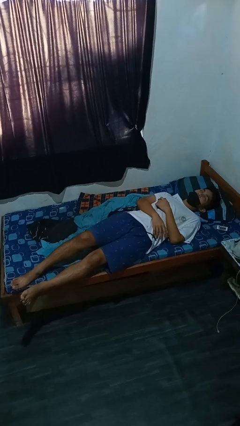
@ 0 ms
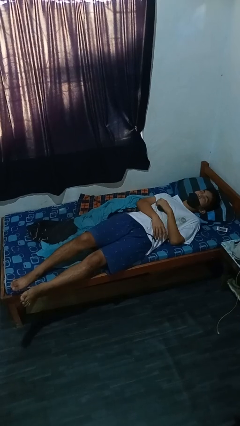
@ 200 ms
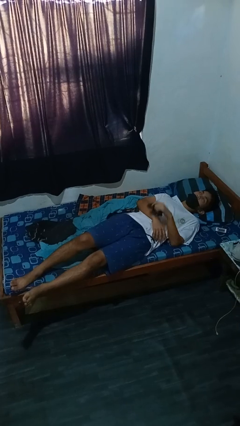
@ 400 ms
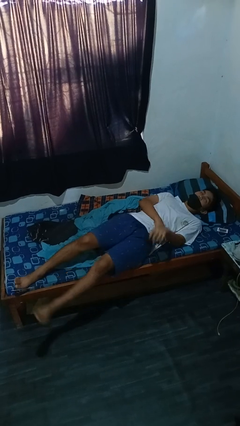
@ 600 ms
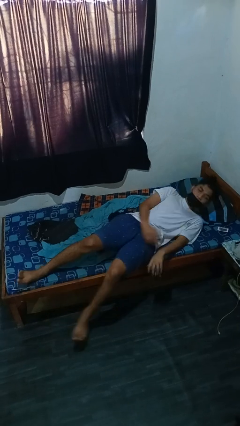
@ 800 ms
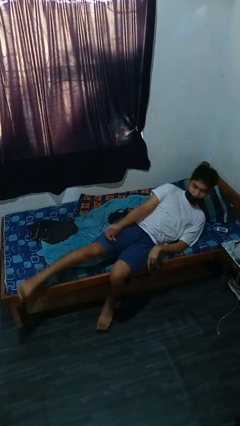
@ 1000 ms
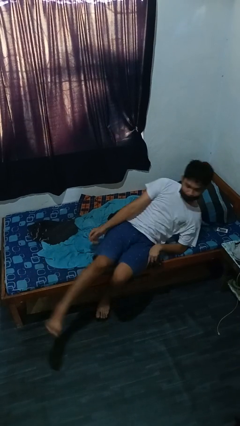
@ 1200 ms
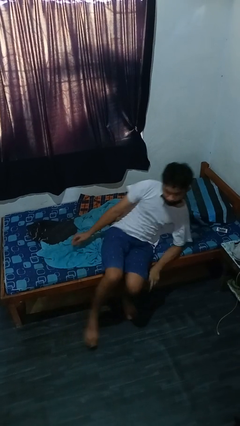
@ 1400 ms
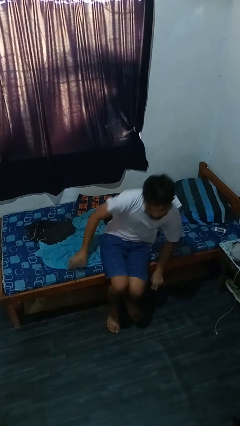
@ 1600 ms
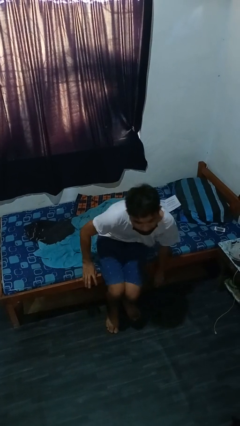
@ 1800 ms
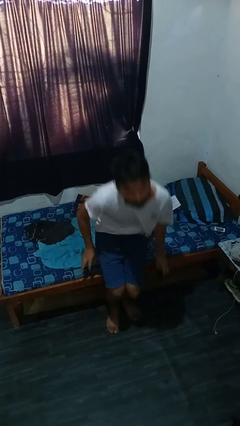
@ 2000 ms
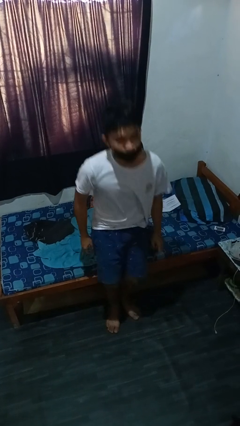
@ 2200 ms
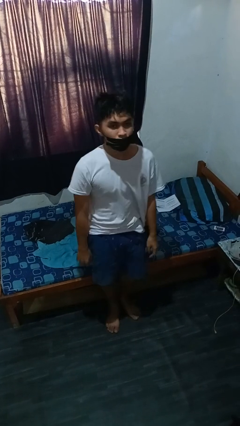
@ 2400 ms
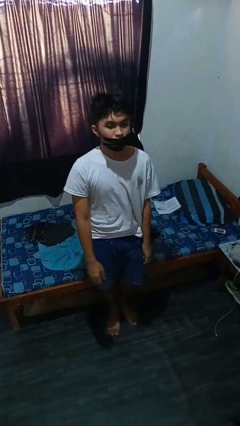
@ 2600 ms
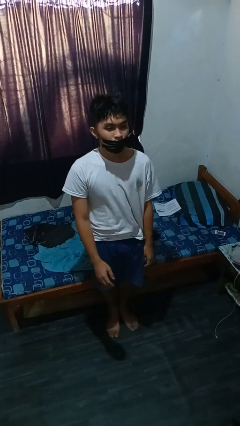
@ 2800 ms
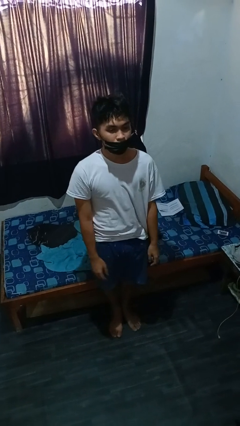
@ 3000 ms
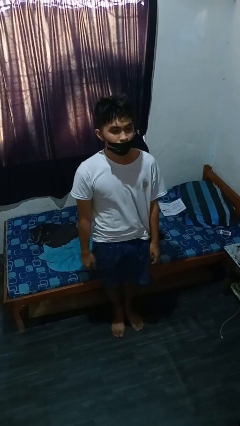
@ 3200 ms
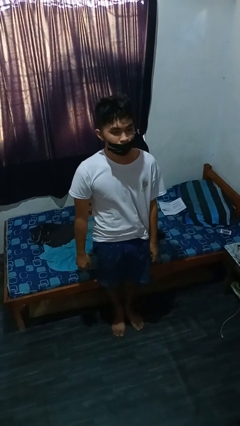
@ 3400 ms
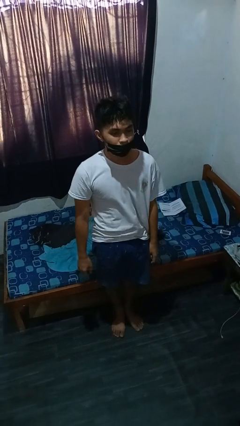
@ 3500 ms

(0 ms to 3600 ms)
person stands up

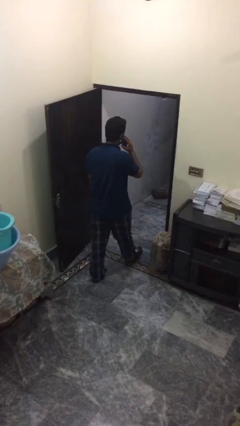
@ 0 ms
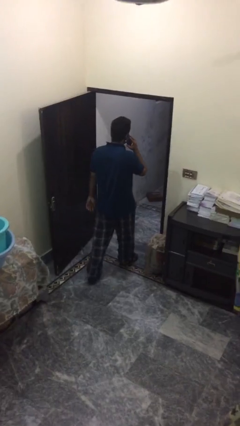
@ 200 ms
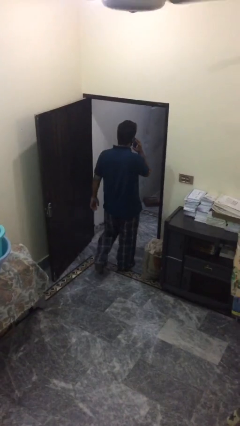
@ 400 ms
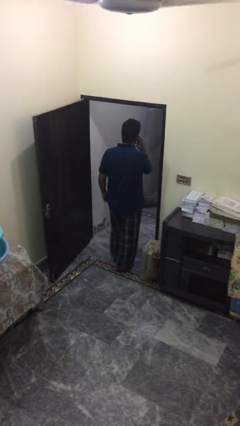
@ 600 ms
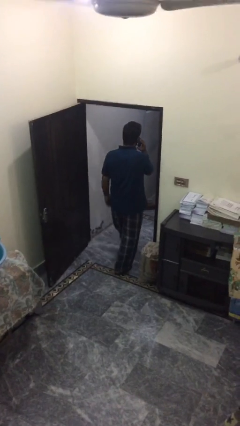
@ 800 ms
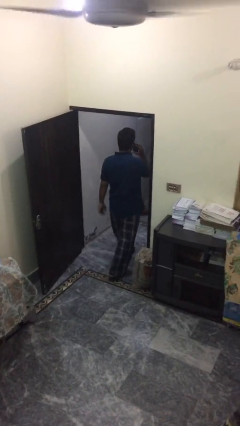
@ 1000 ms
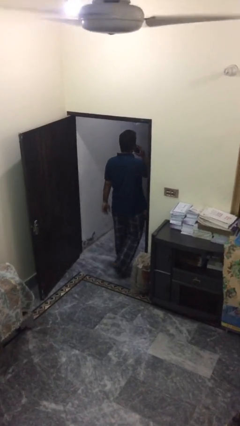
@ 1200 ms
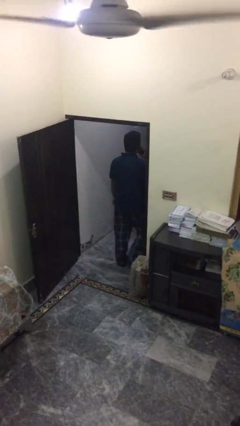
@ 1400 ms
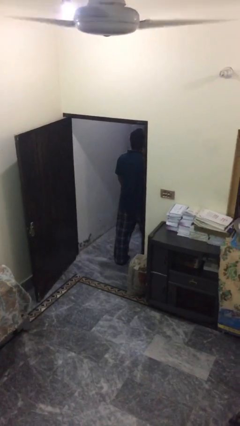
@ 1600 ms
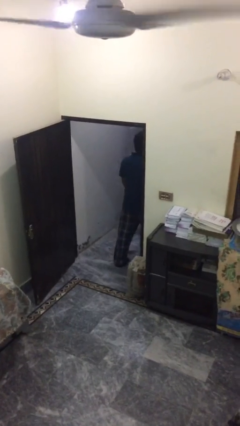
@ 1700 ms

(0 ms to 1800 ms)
person exits scene through structure

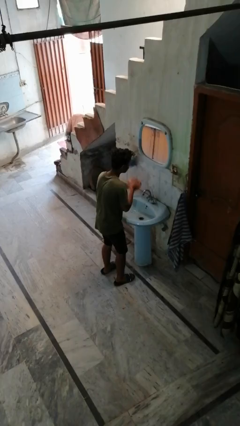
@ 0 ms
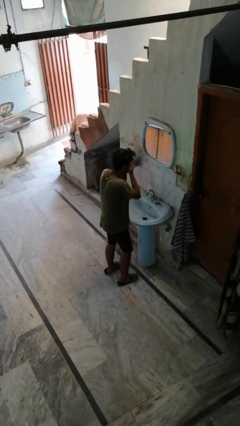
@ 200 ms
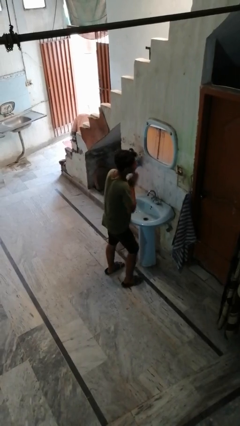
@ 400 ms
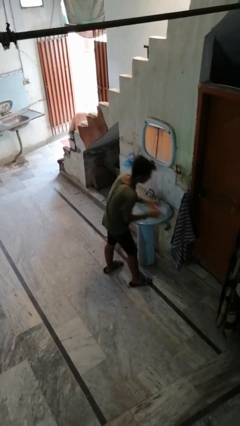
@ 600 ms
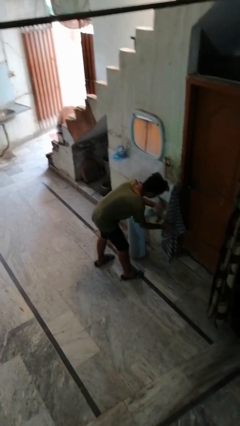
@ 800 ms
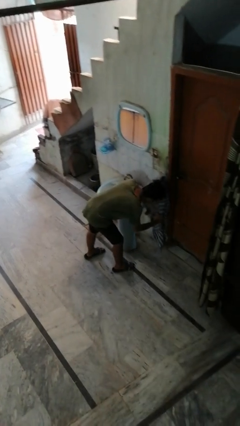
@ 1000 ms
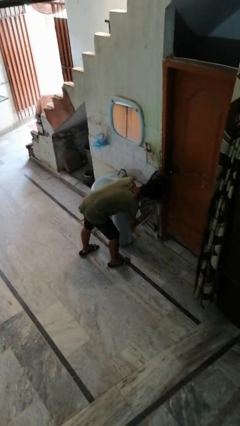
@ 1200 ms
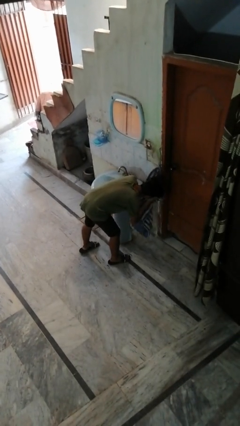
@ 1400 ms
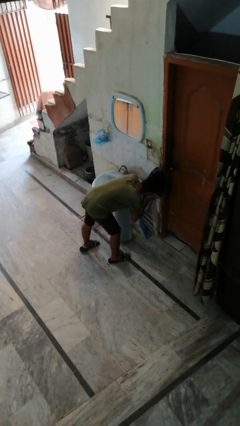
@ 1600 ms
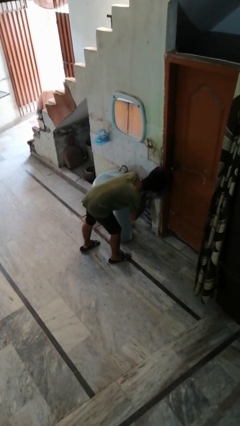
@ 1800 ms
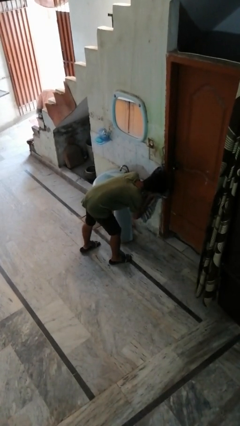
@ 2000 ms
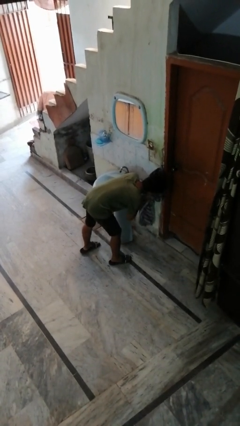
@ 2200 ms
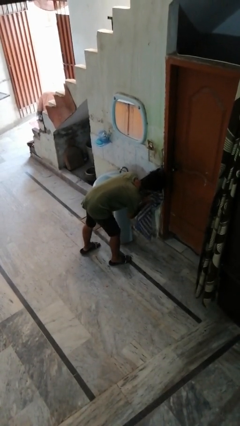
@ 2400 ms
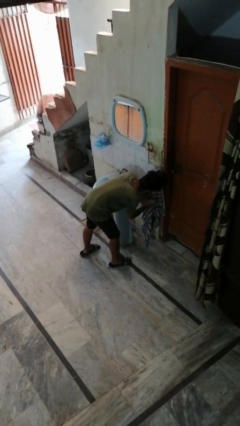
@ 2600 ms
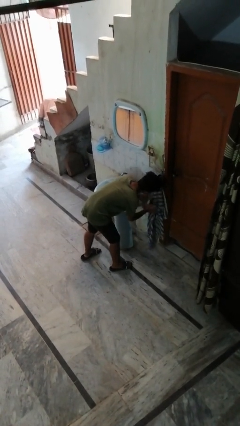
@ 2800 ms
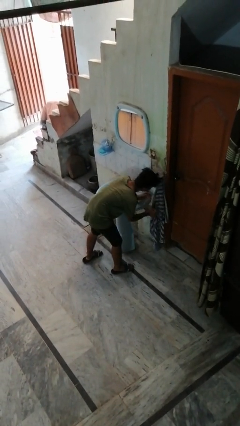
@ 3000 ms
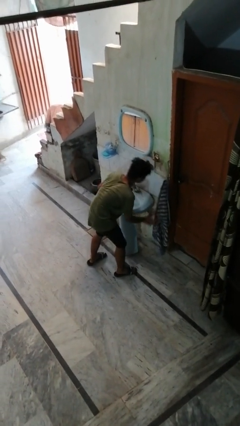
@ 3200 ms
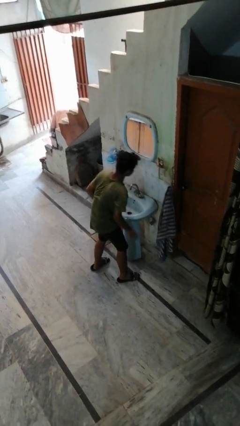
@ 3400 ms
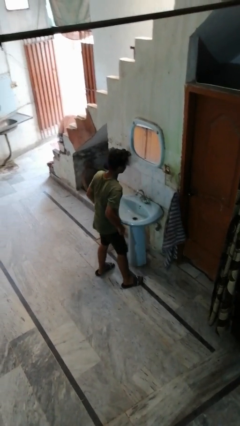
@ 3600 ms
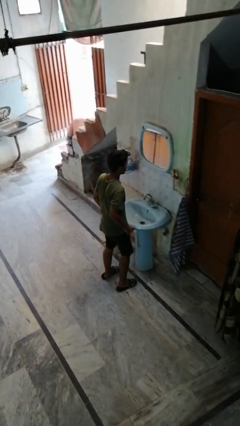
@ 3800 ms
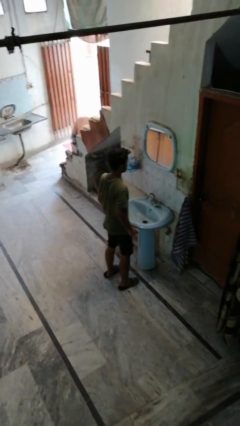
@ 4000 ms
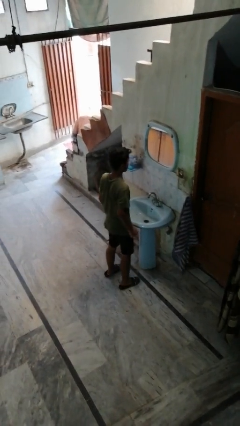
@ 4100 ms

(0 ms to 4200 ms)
person dries face with towel

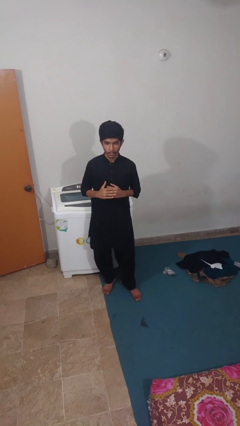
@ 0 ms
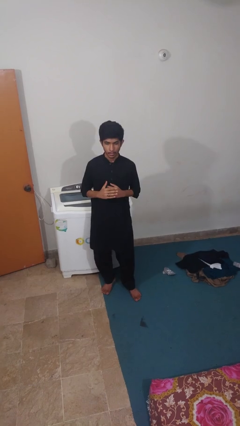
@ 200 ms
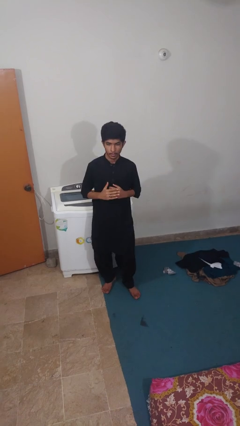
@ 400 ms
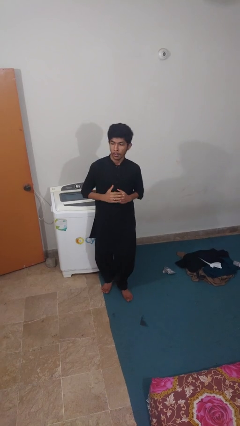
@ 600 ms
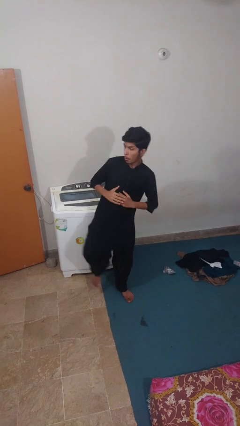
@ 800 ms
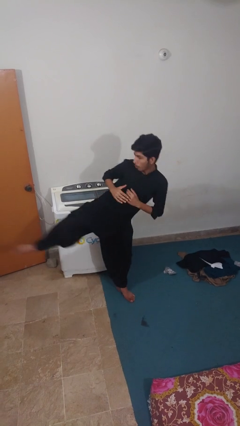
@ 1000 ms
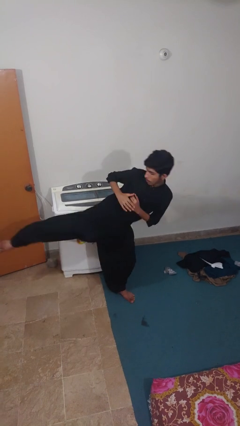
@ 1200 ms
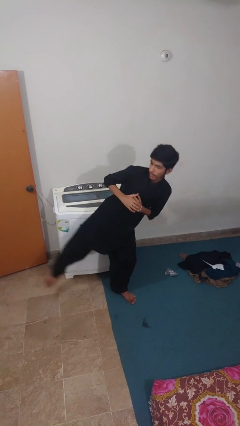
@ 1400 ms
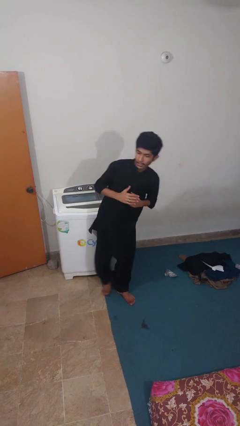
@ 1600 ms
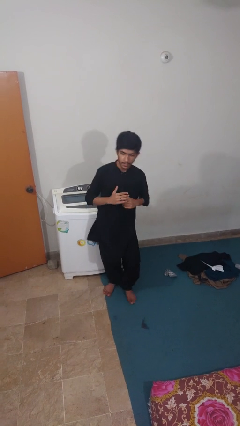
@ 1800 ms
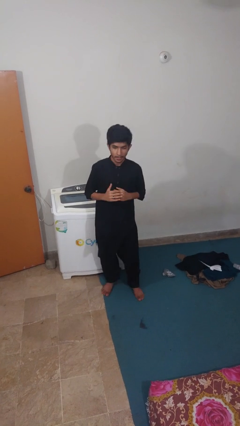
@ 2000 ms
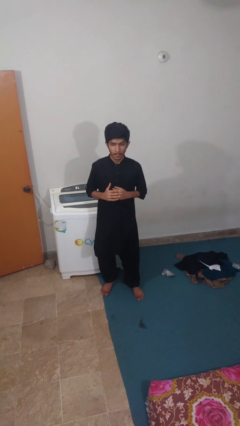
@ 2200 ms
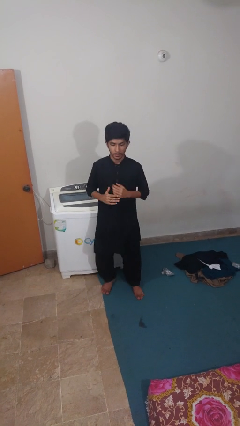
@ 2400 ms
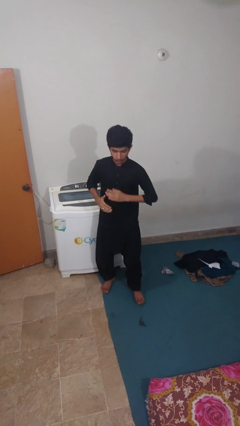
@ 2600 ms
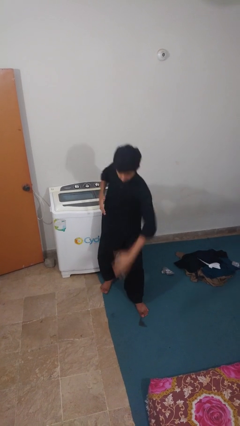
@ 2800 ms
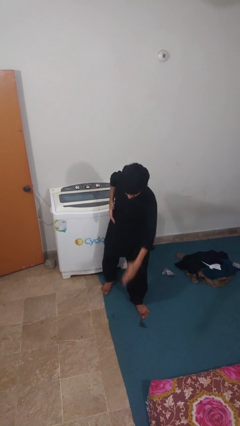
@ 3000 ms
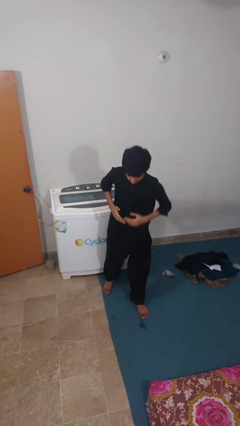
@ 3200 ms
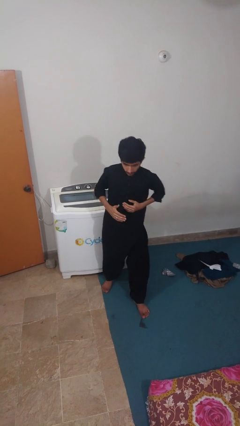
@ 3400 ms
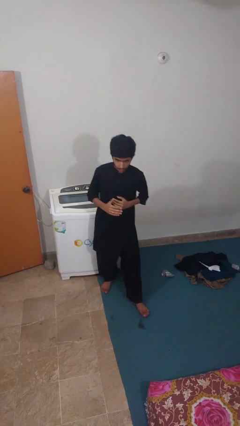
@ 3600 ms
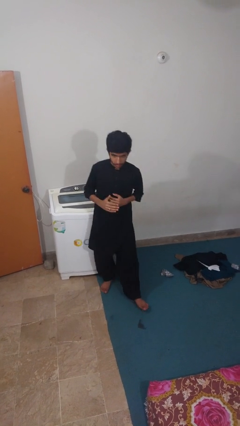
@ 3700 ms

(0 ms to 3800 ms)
person karate kicks

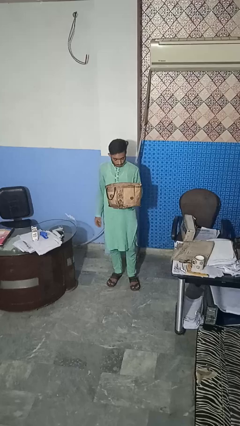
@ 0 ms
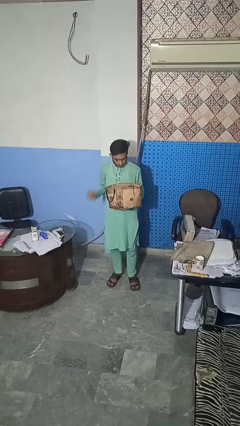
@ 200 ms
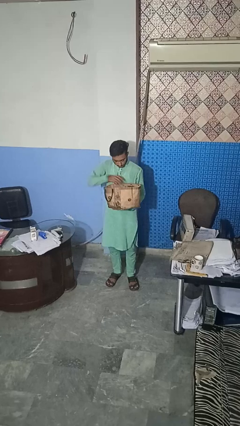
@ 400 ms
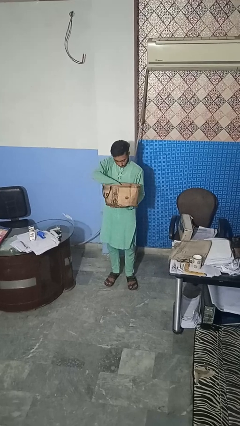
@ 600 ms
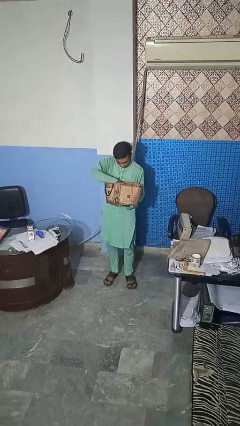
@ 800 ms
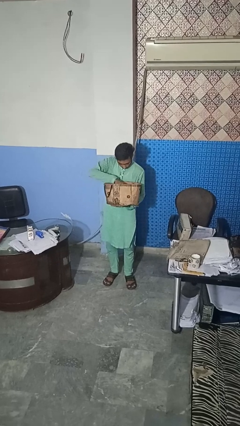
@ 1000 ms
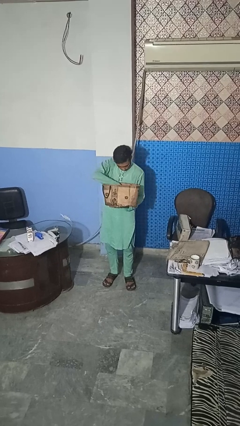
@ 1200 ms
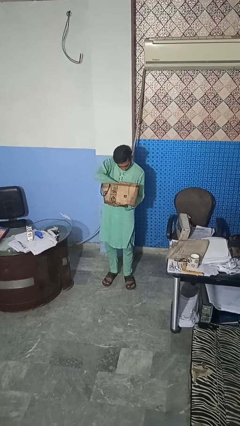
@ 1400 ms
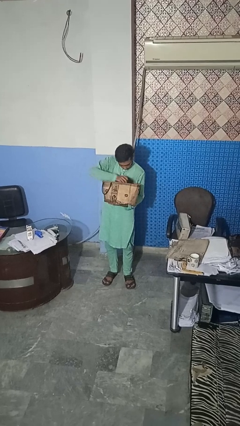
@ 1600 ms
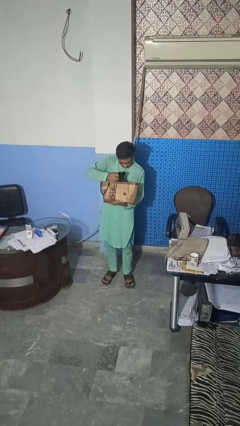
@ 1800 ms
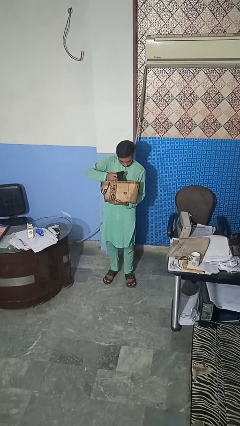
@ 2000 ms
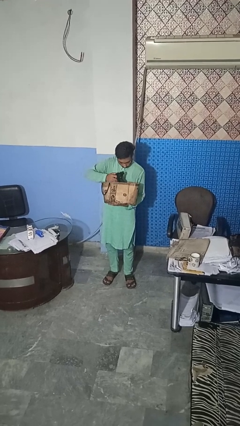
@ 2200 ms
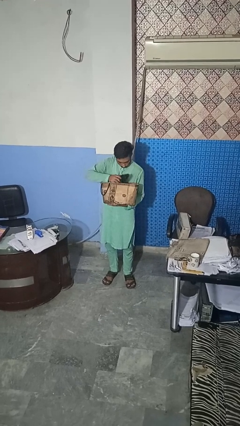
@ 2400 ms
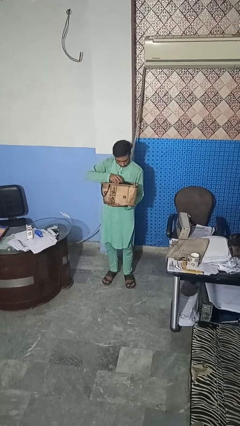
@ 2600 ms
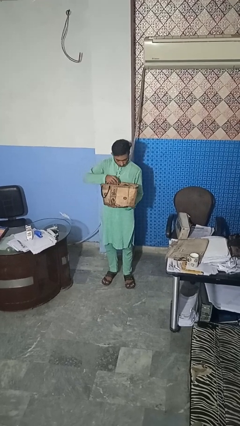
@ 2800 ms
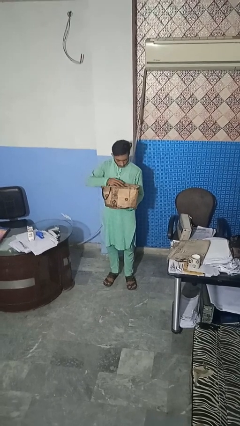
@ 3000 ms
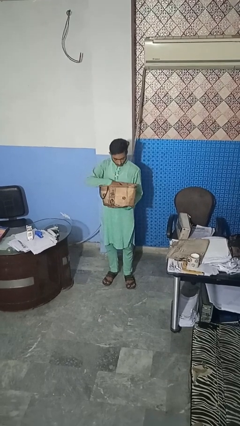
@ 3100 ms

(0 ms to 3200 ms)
person searches in bag

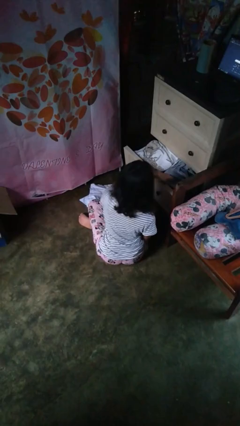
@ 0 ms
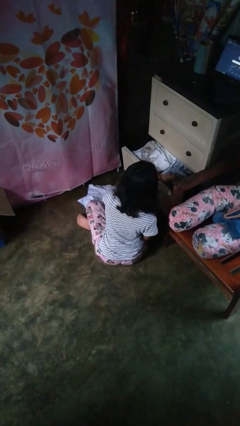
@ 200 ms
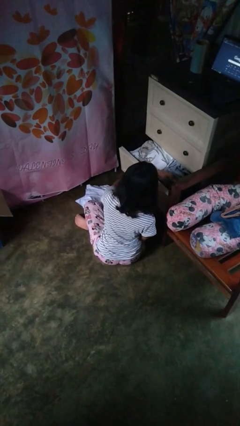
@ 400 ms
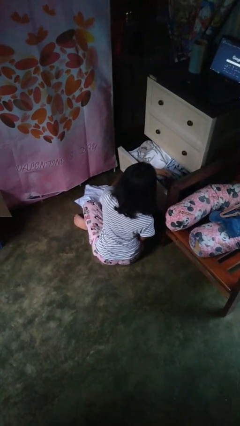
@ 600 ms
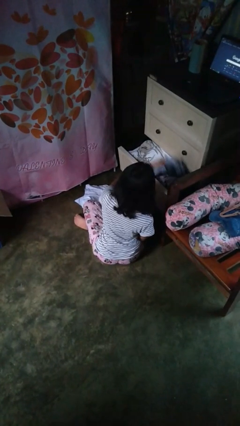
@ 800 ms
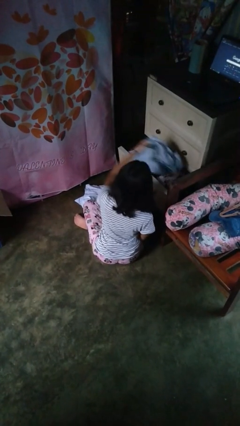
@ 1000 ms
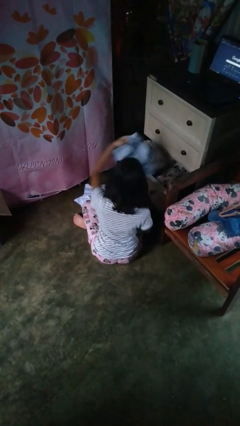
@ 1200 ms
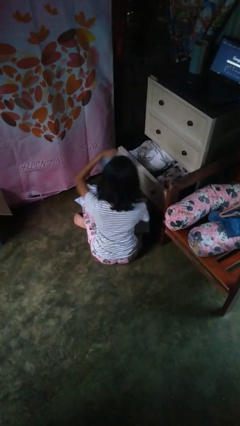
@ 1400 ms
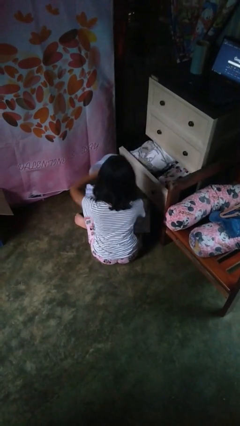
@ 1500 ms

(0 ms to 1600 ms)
person takes clothes from dresser
